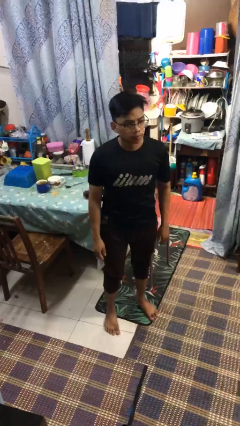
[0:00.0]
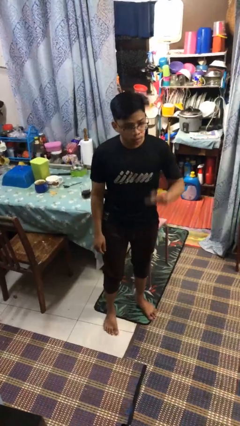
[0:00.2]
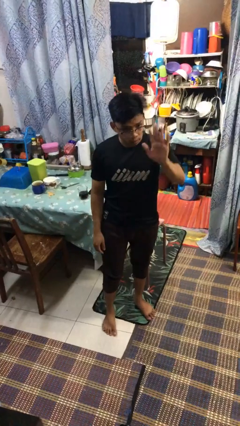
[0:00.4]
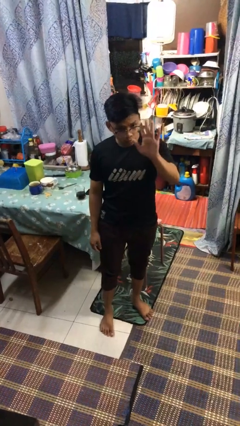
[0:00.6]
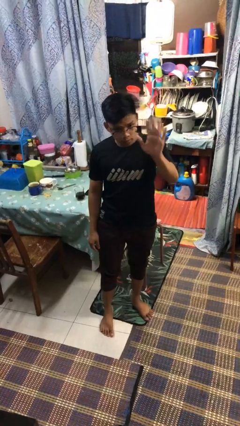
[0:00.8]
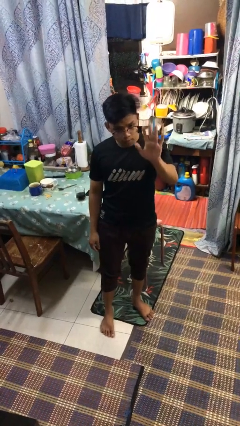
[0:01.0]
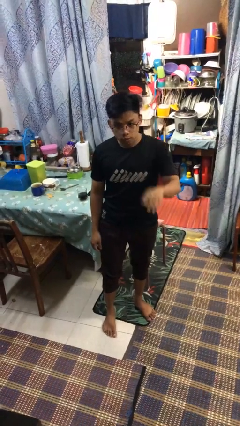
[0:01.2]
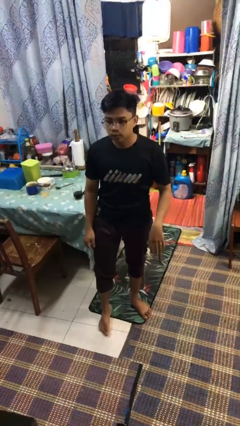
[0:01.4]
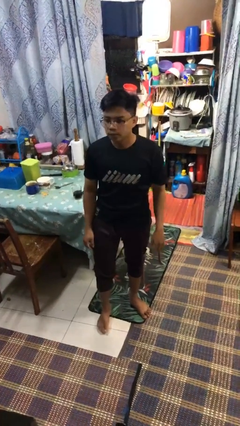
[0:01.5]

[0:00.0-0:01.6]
person gestures stop

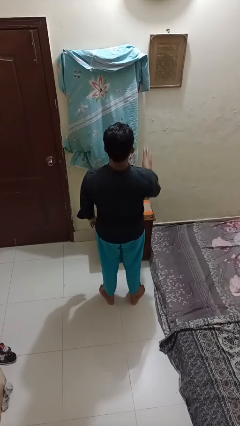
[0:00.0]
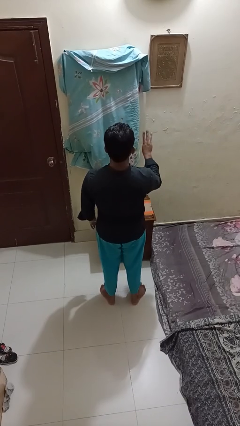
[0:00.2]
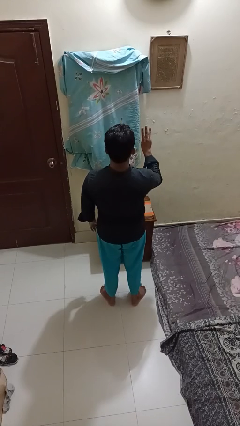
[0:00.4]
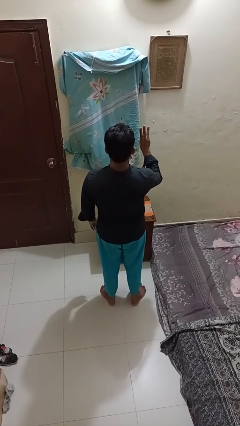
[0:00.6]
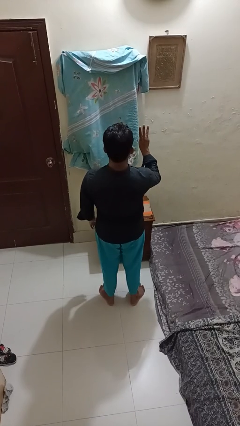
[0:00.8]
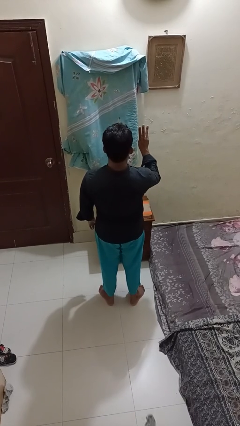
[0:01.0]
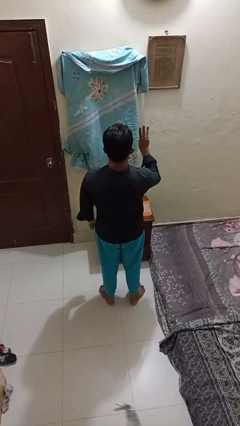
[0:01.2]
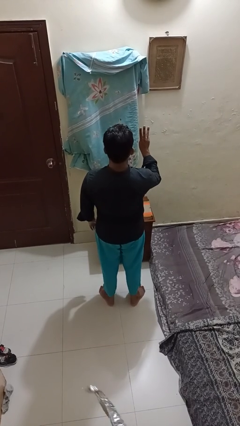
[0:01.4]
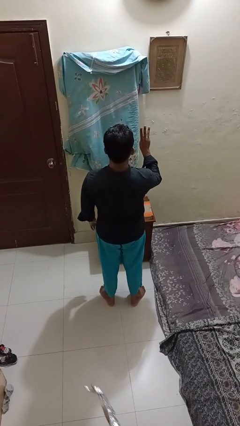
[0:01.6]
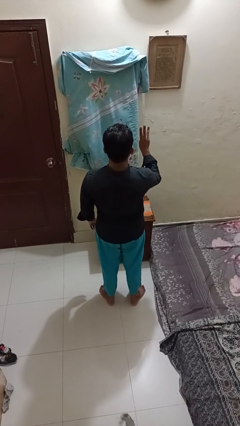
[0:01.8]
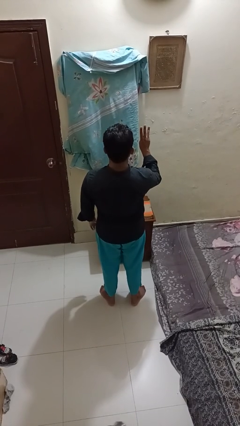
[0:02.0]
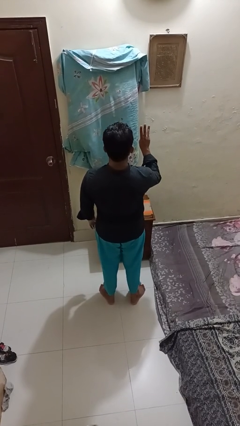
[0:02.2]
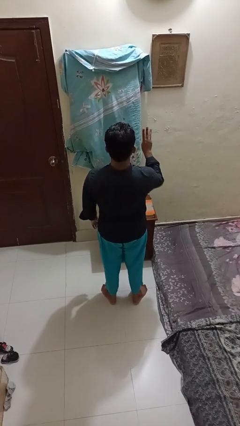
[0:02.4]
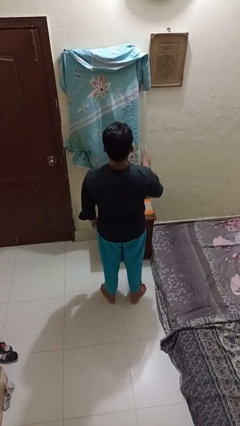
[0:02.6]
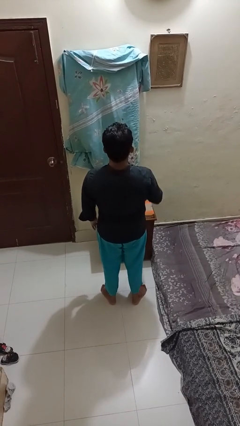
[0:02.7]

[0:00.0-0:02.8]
person gestures number three

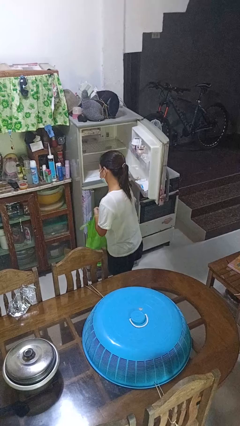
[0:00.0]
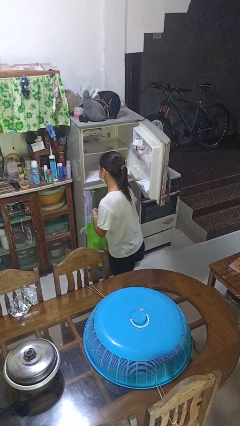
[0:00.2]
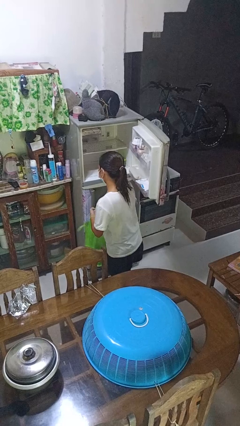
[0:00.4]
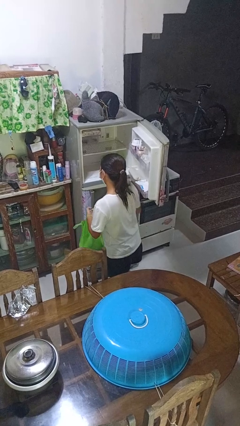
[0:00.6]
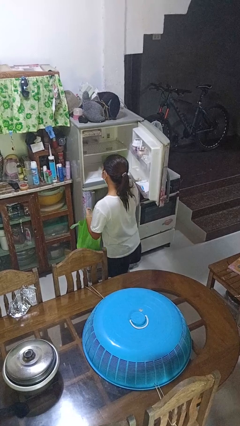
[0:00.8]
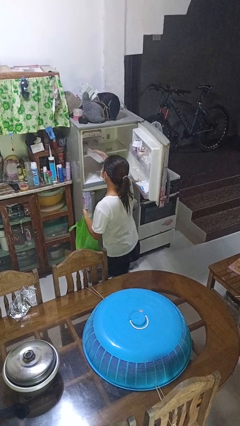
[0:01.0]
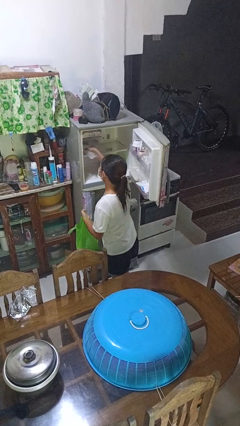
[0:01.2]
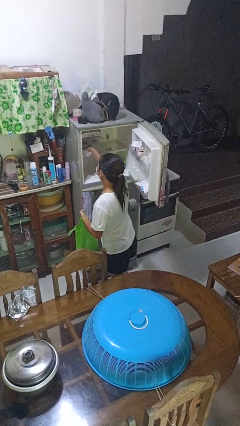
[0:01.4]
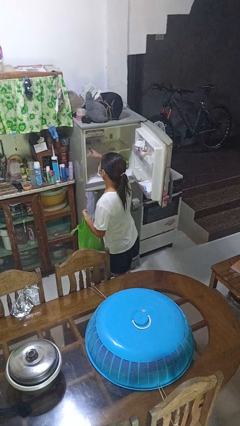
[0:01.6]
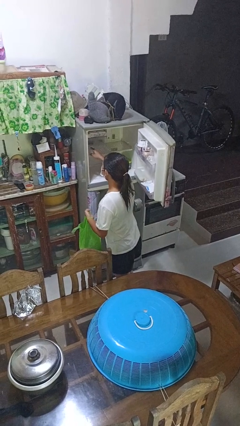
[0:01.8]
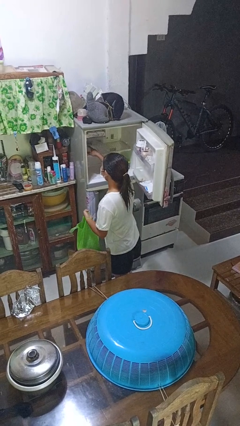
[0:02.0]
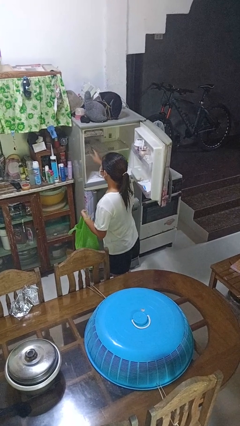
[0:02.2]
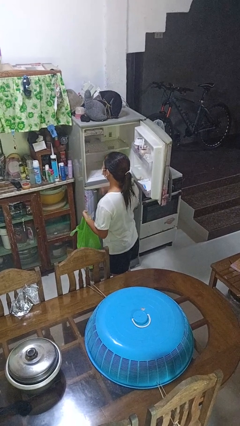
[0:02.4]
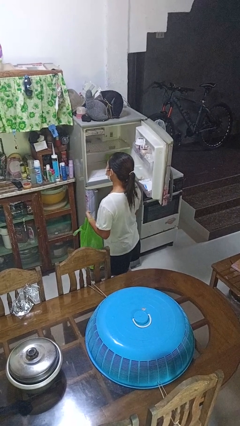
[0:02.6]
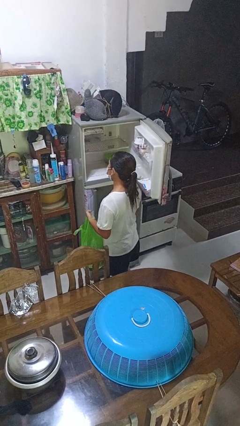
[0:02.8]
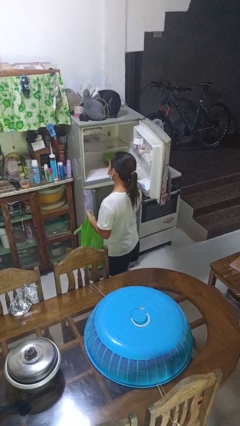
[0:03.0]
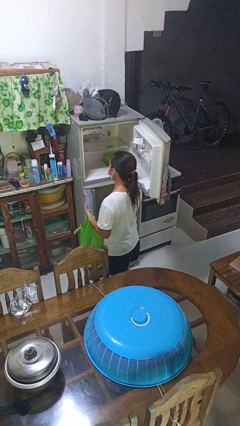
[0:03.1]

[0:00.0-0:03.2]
person loads groceries into refrigerator

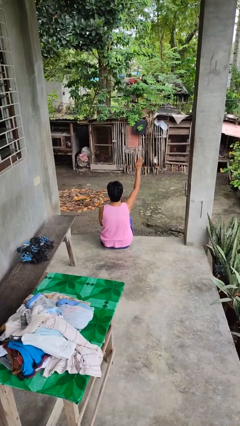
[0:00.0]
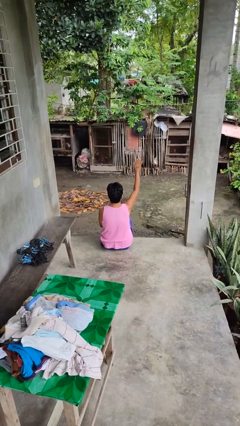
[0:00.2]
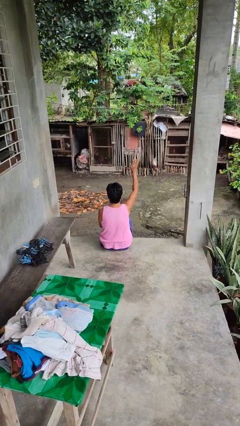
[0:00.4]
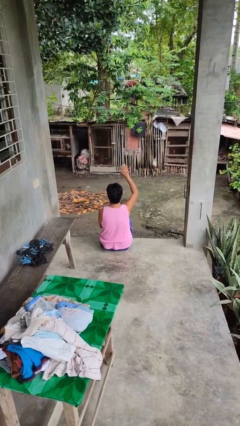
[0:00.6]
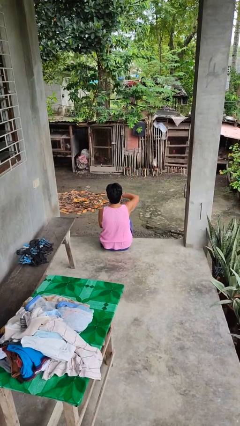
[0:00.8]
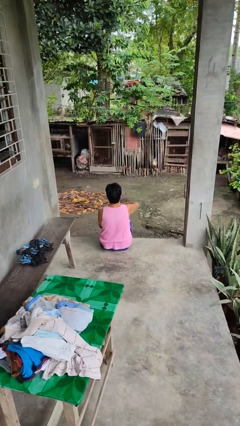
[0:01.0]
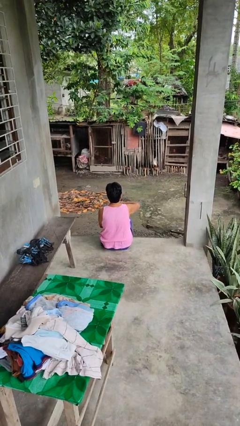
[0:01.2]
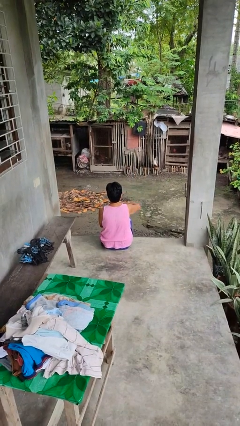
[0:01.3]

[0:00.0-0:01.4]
person gestures swipe down

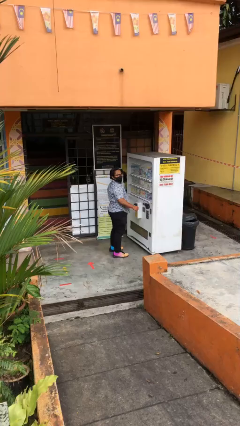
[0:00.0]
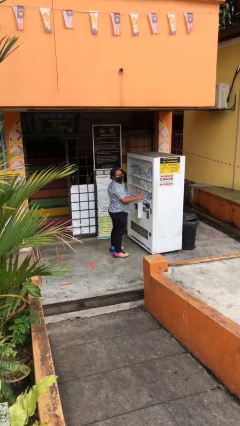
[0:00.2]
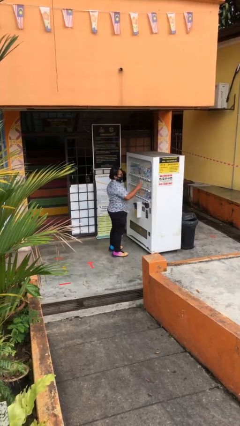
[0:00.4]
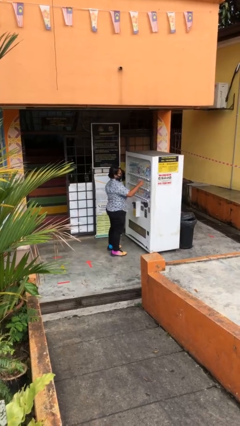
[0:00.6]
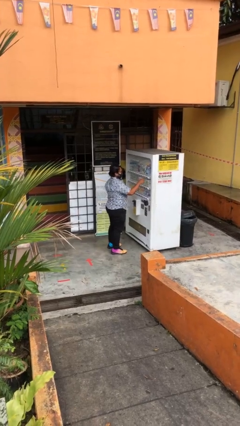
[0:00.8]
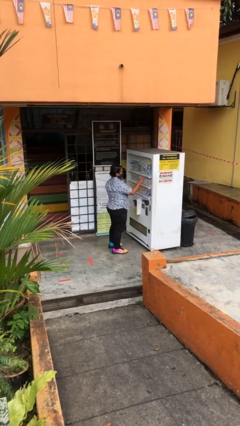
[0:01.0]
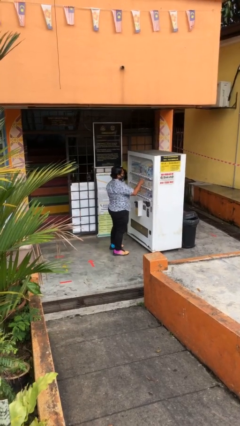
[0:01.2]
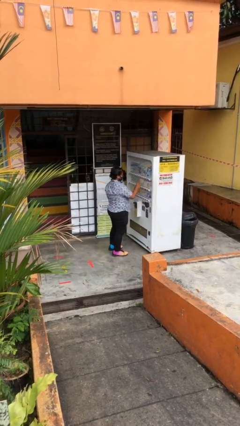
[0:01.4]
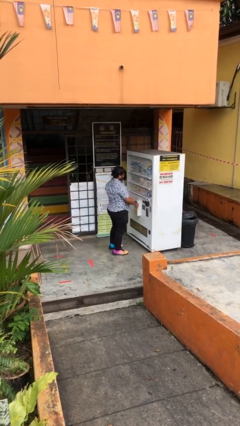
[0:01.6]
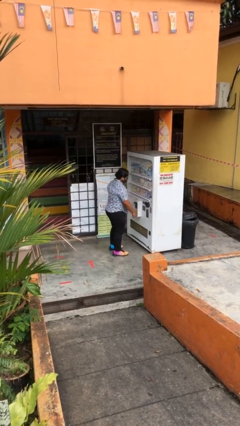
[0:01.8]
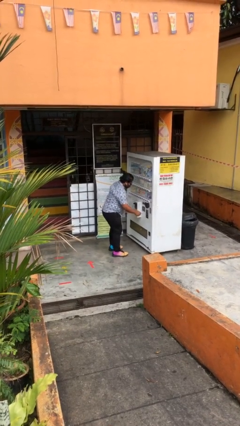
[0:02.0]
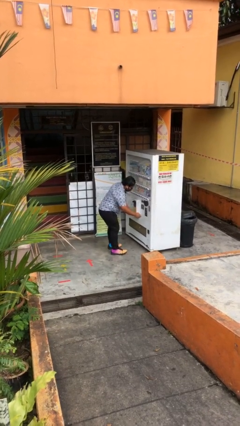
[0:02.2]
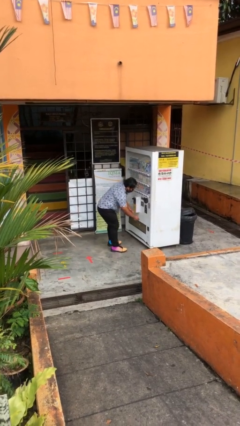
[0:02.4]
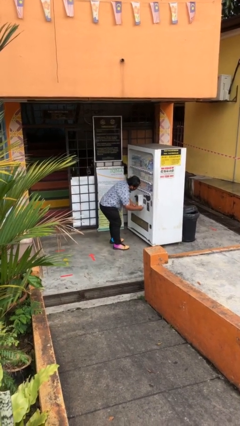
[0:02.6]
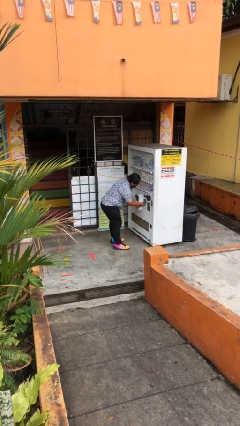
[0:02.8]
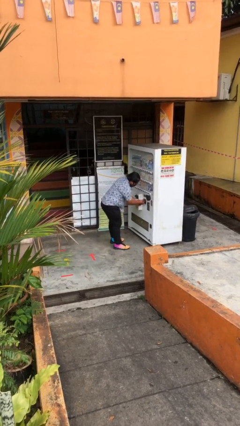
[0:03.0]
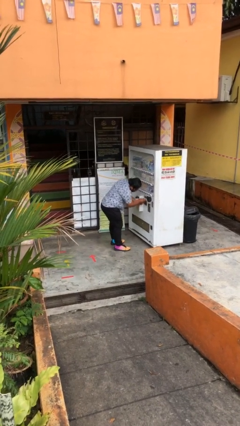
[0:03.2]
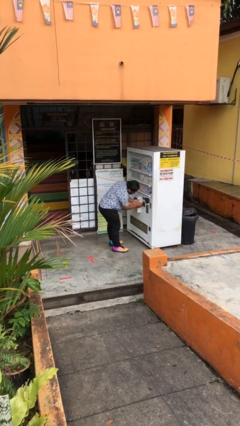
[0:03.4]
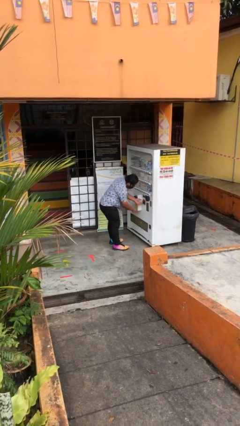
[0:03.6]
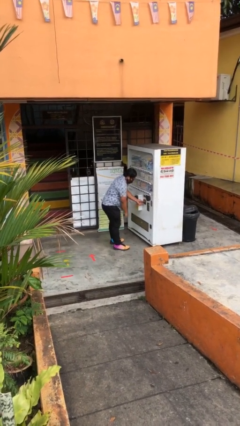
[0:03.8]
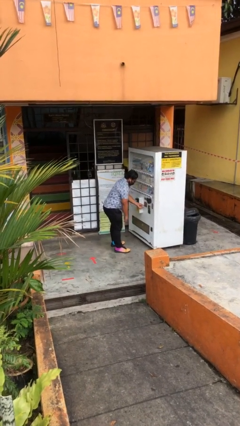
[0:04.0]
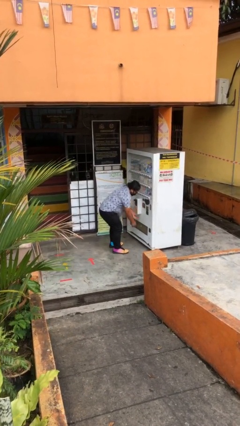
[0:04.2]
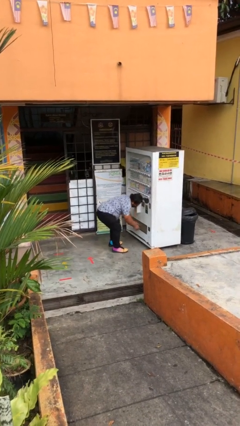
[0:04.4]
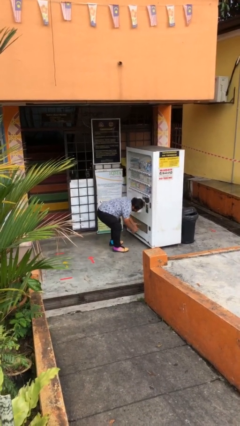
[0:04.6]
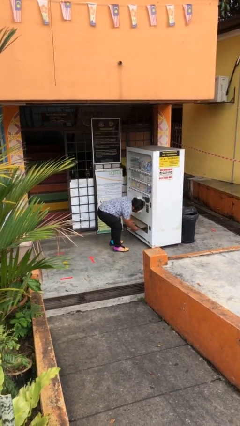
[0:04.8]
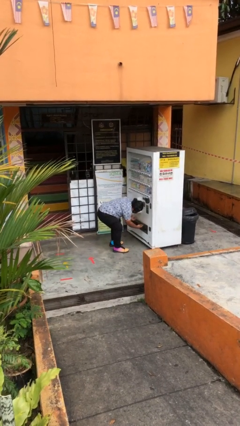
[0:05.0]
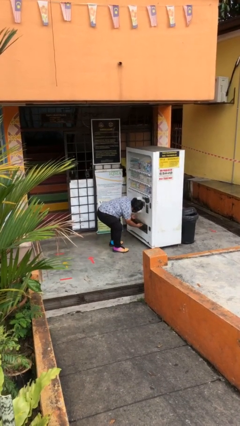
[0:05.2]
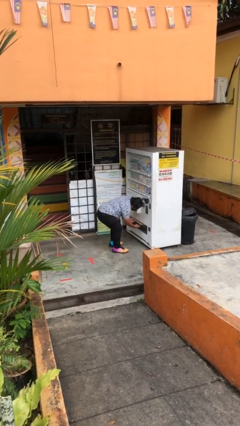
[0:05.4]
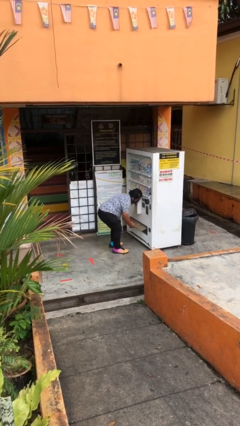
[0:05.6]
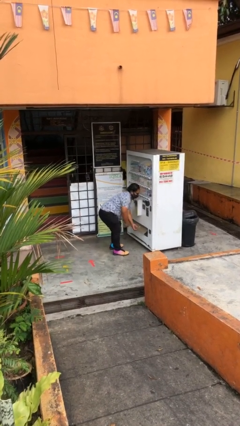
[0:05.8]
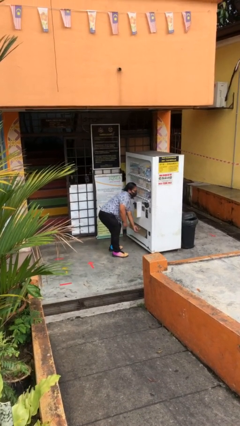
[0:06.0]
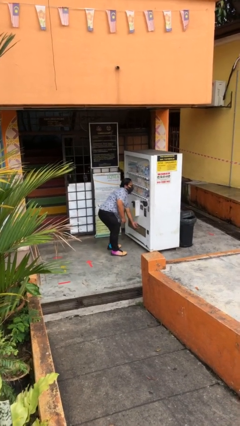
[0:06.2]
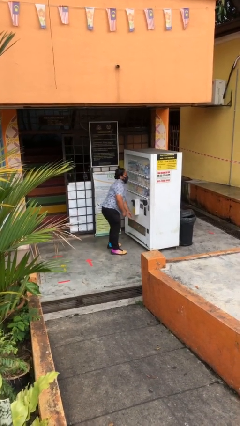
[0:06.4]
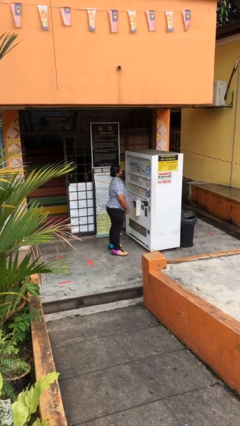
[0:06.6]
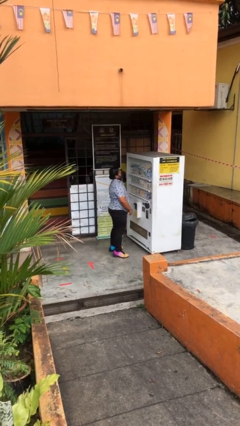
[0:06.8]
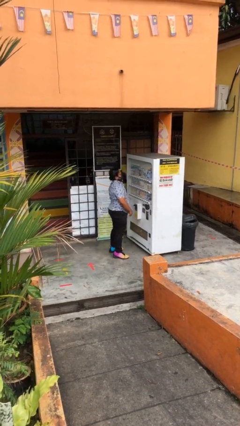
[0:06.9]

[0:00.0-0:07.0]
person purchases from machine

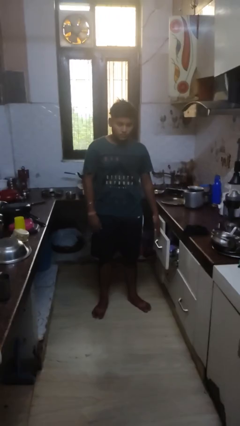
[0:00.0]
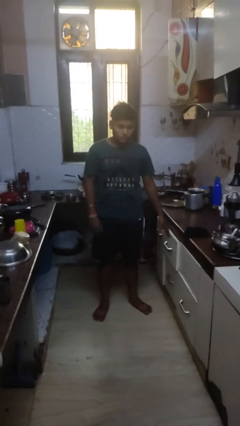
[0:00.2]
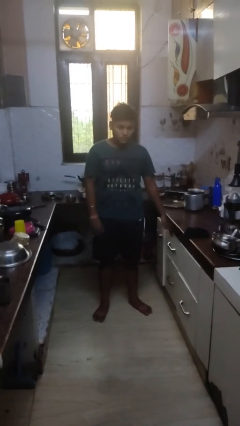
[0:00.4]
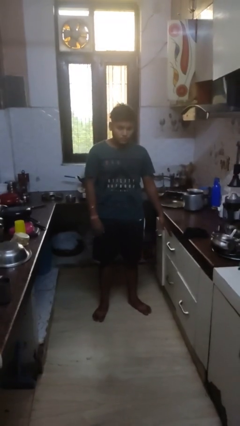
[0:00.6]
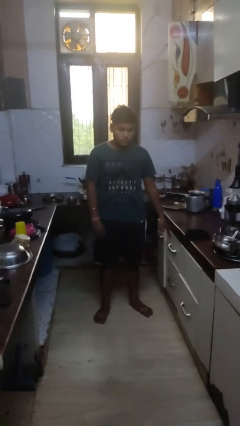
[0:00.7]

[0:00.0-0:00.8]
person closes kitchen drawer

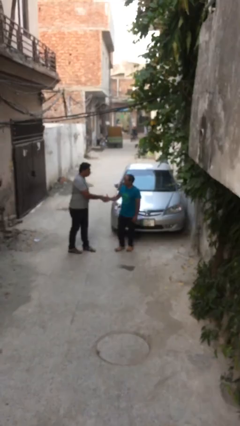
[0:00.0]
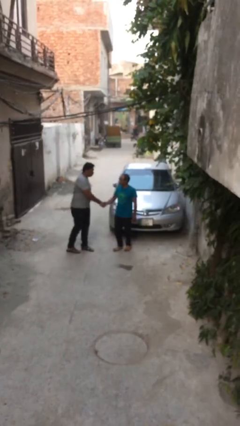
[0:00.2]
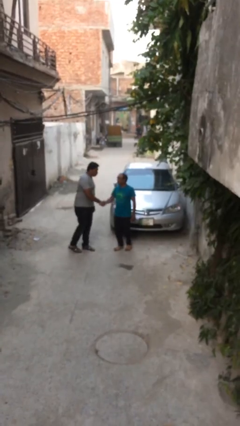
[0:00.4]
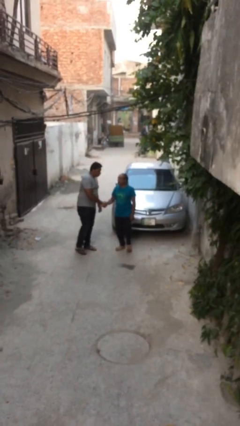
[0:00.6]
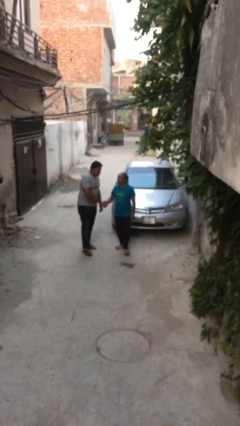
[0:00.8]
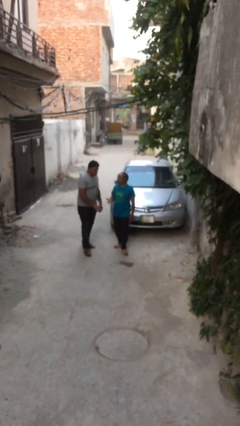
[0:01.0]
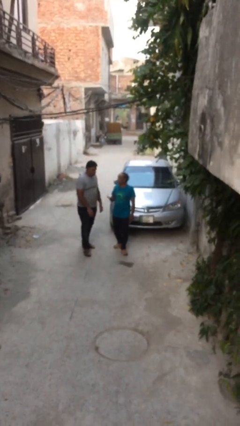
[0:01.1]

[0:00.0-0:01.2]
person shakes hand
